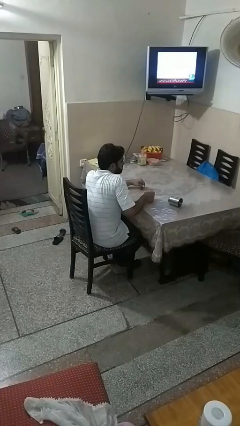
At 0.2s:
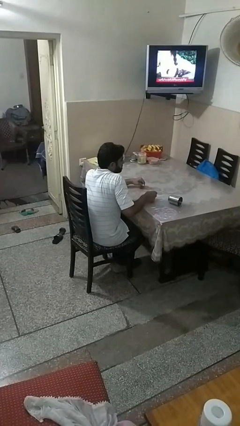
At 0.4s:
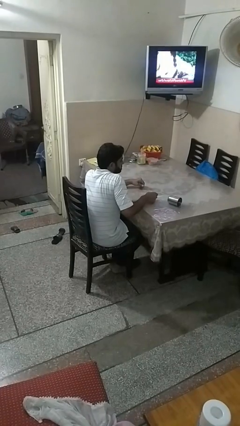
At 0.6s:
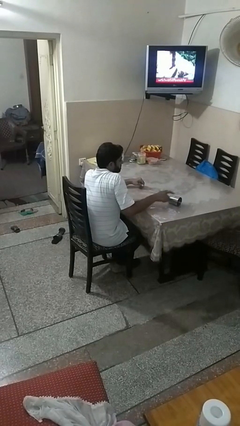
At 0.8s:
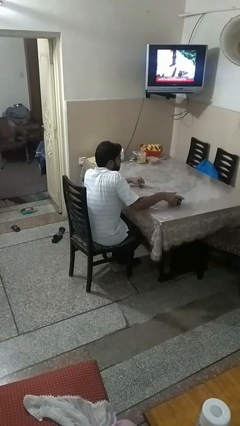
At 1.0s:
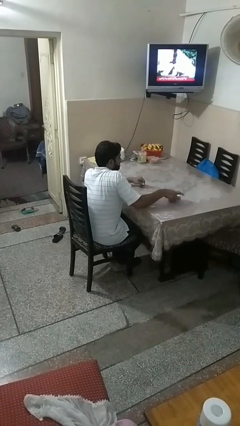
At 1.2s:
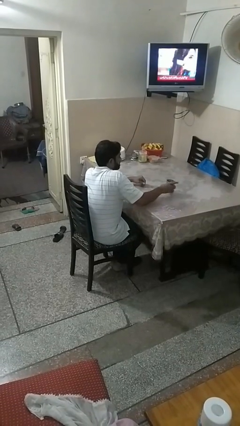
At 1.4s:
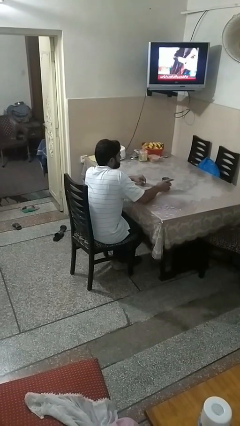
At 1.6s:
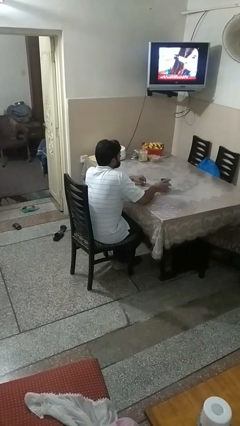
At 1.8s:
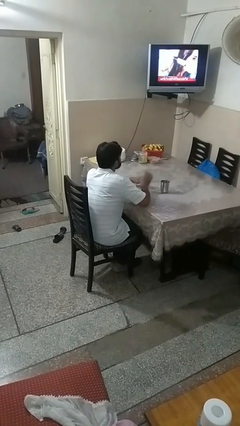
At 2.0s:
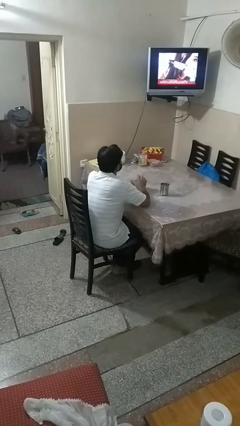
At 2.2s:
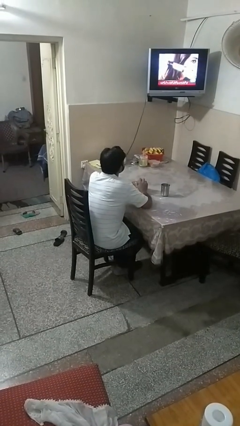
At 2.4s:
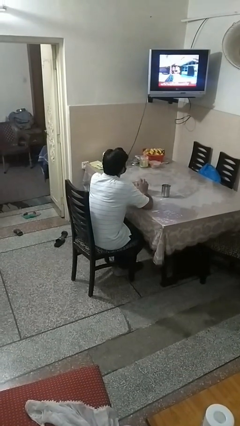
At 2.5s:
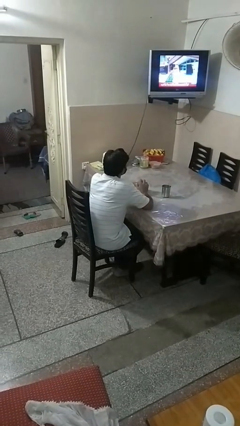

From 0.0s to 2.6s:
person sets upright glass

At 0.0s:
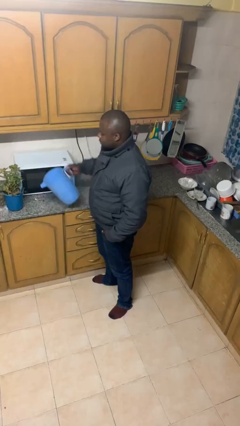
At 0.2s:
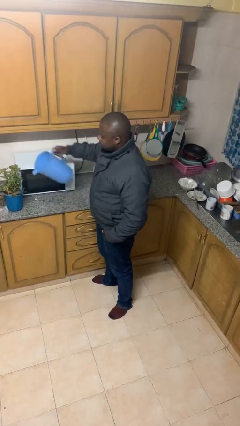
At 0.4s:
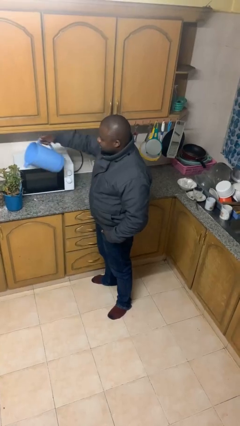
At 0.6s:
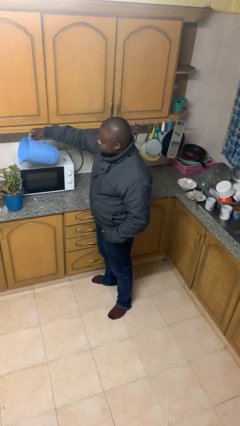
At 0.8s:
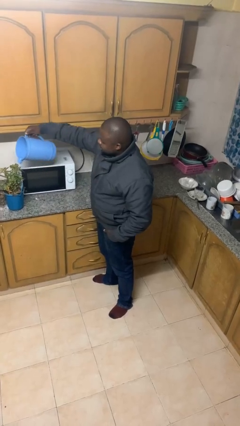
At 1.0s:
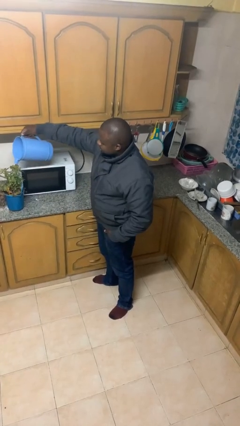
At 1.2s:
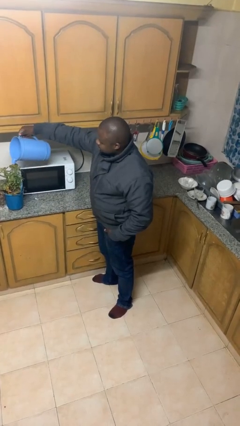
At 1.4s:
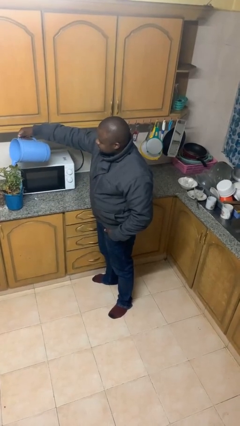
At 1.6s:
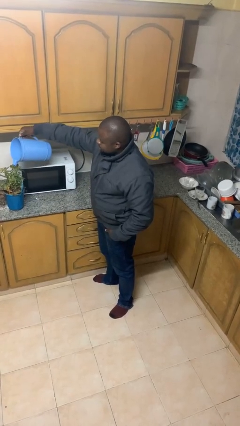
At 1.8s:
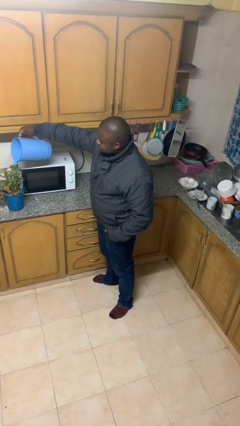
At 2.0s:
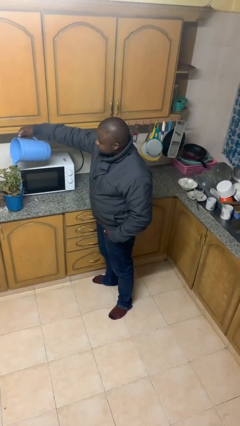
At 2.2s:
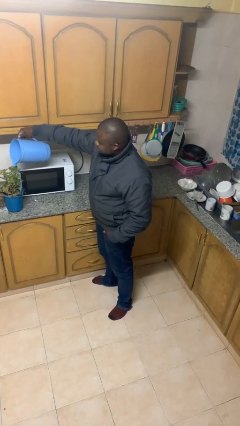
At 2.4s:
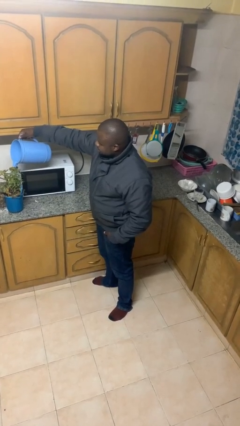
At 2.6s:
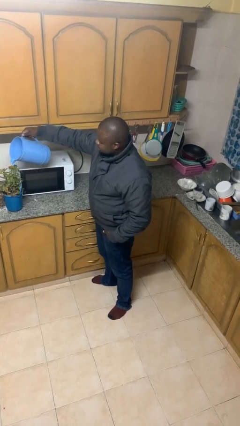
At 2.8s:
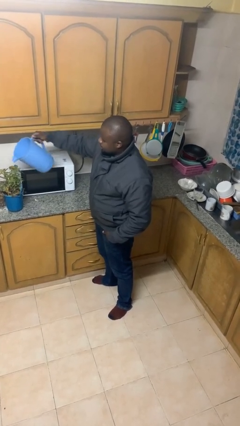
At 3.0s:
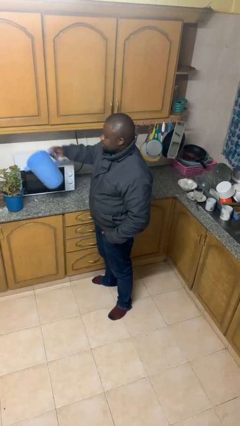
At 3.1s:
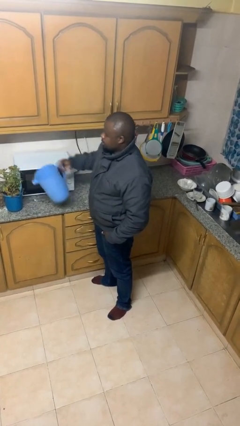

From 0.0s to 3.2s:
person waters houseplant

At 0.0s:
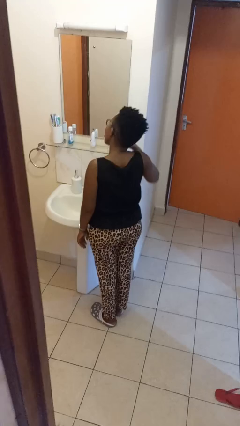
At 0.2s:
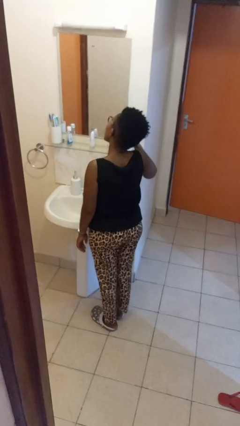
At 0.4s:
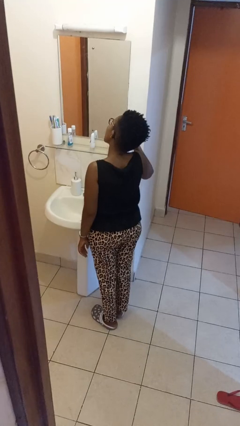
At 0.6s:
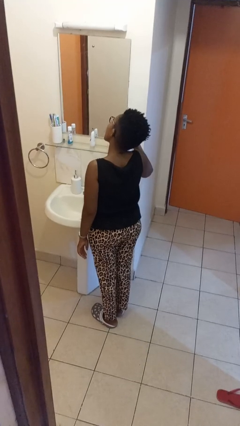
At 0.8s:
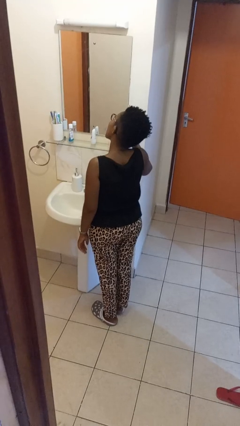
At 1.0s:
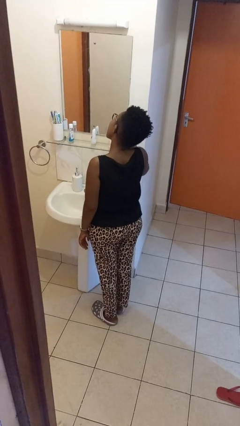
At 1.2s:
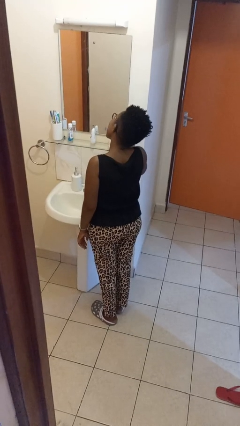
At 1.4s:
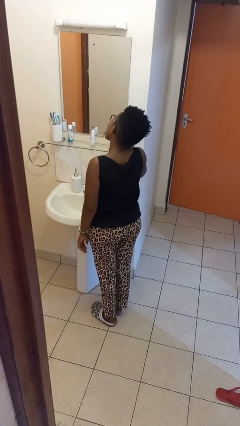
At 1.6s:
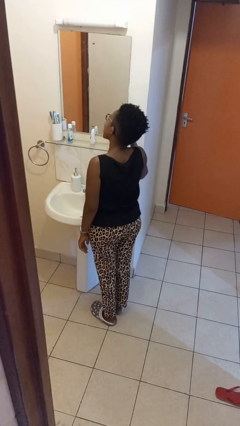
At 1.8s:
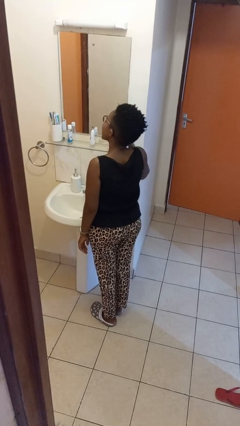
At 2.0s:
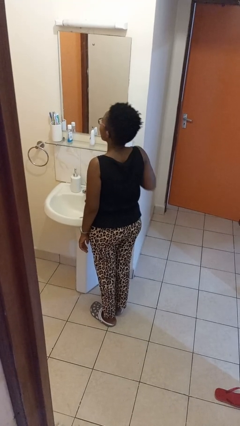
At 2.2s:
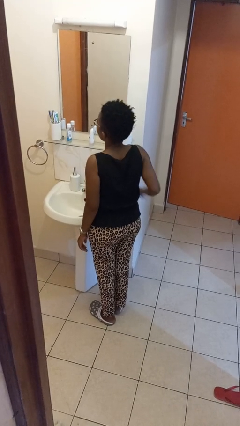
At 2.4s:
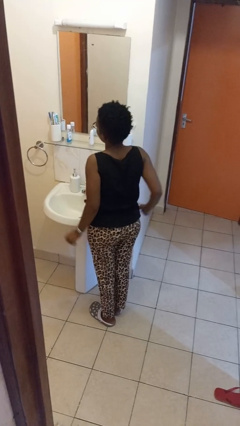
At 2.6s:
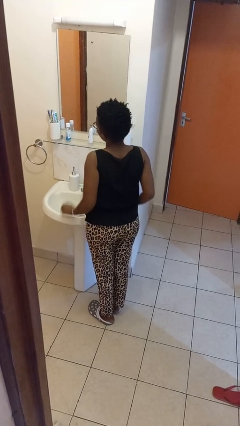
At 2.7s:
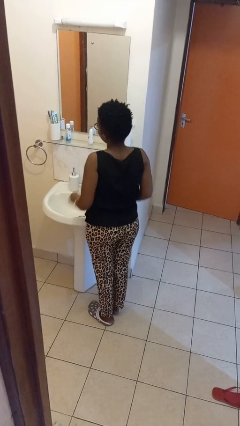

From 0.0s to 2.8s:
person brushes teeth

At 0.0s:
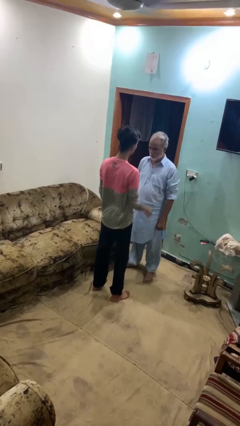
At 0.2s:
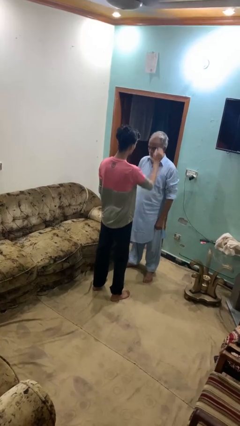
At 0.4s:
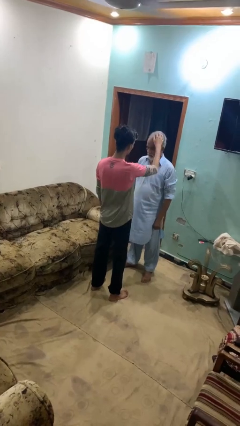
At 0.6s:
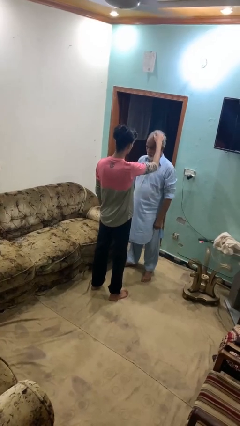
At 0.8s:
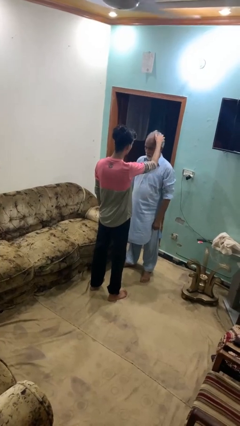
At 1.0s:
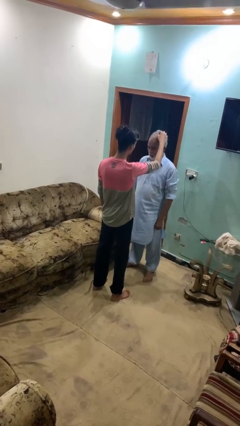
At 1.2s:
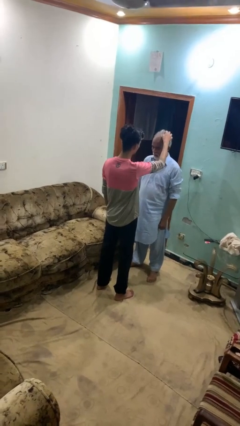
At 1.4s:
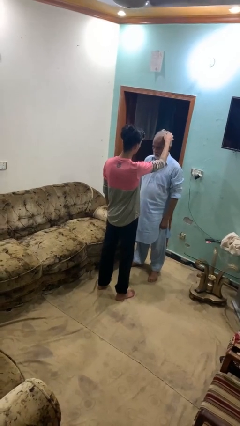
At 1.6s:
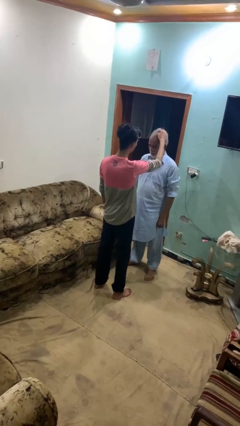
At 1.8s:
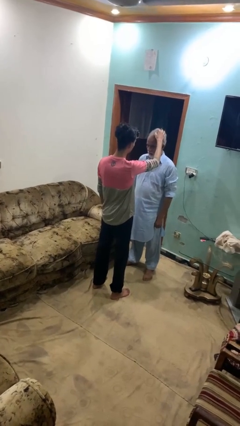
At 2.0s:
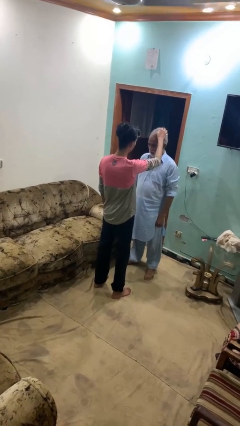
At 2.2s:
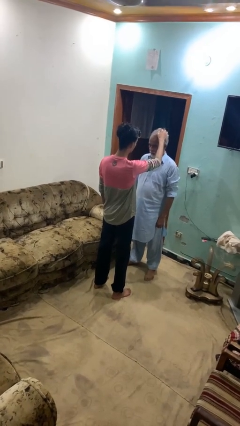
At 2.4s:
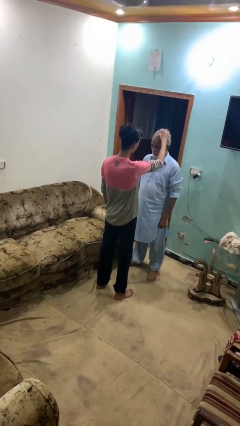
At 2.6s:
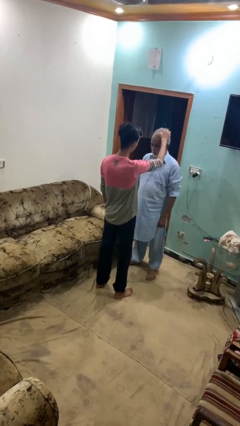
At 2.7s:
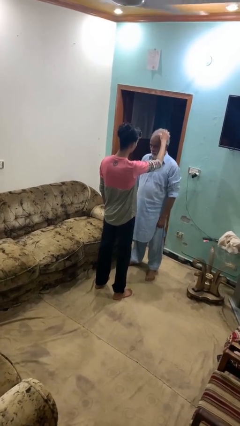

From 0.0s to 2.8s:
person grabs person by hair

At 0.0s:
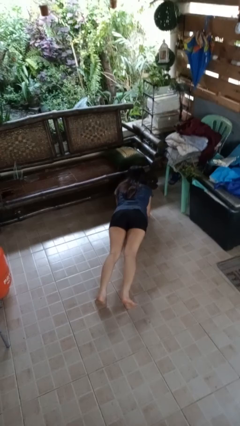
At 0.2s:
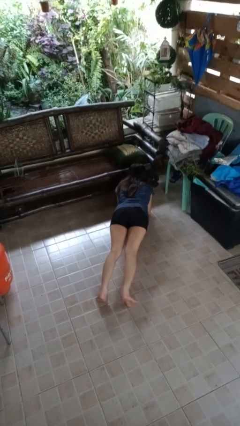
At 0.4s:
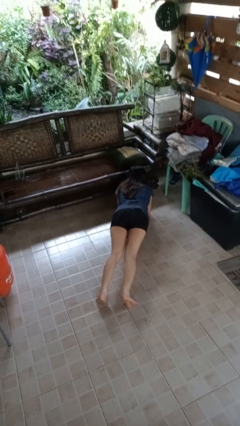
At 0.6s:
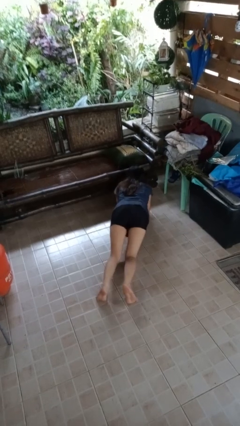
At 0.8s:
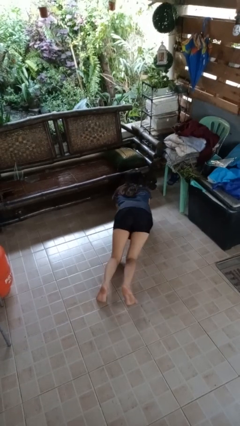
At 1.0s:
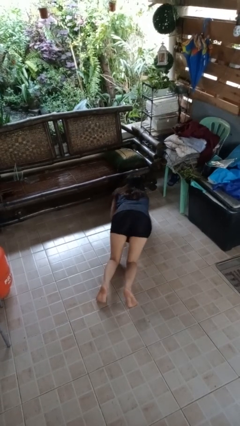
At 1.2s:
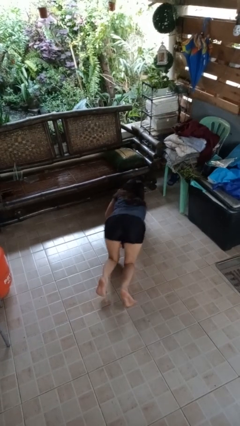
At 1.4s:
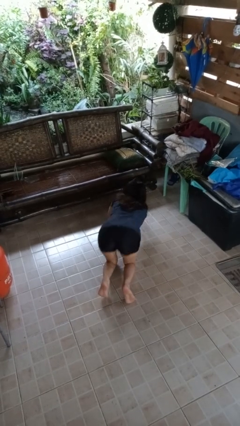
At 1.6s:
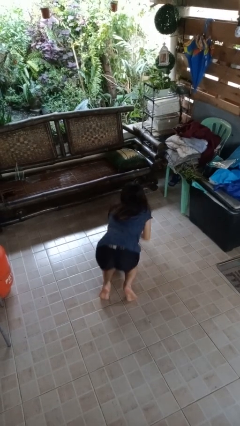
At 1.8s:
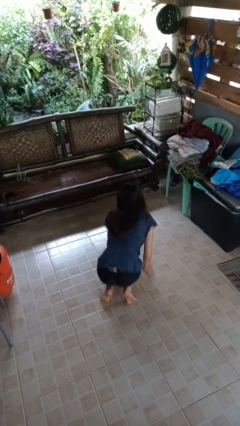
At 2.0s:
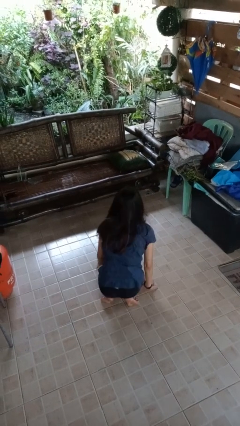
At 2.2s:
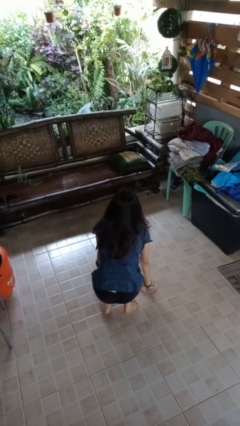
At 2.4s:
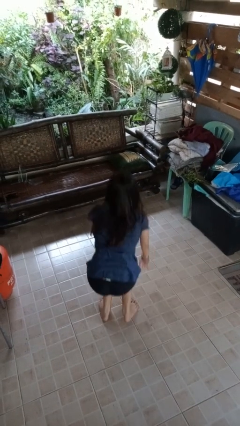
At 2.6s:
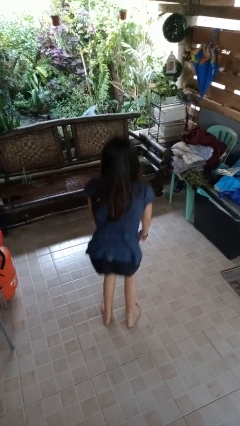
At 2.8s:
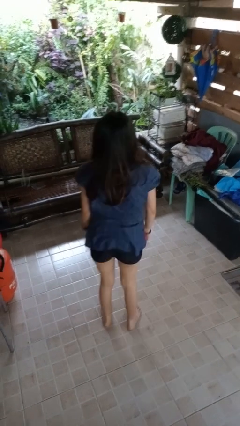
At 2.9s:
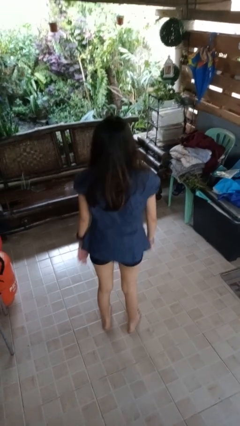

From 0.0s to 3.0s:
person stands up from floor

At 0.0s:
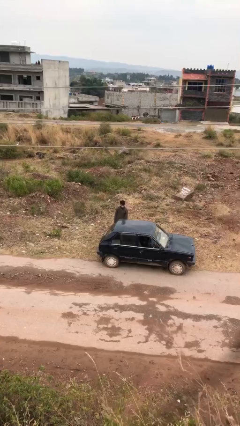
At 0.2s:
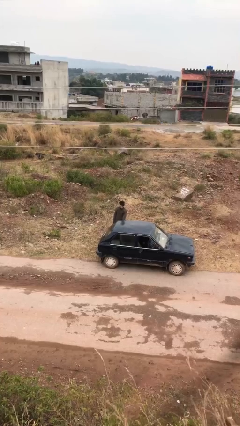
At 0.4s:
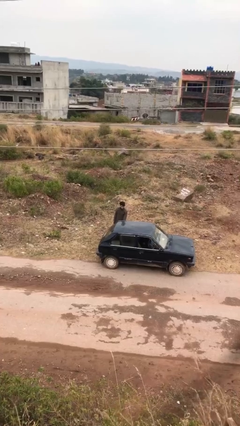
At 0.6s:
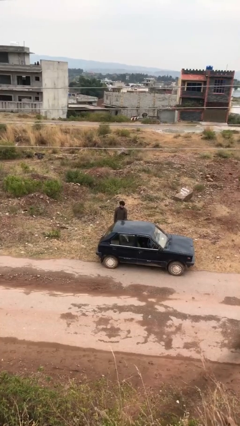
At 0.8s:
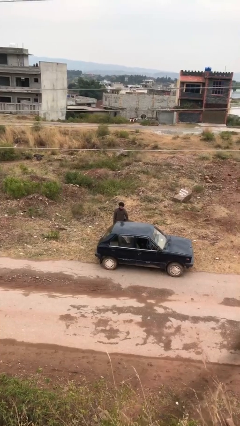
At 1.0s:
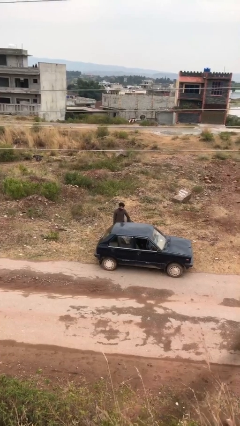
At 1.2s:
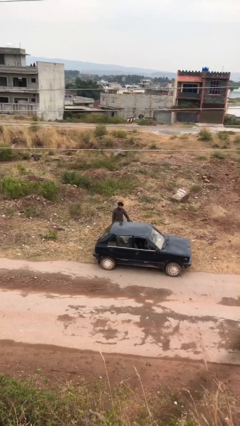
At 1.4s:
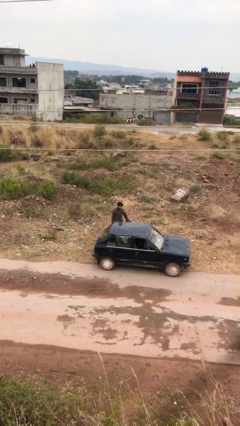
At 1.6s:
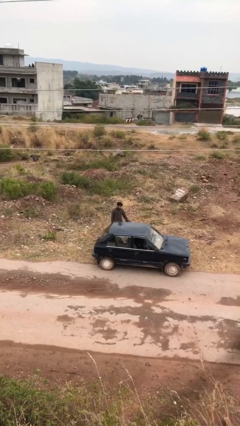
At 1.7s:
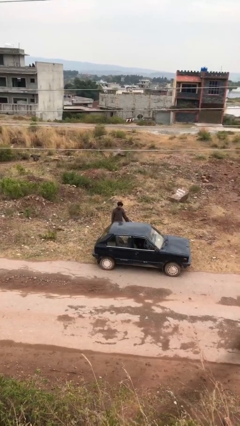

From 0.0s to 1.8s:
person opens car door

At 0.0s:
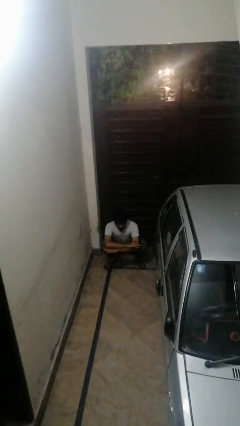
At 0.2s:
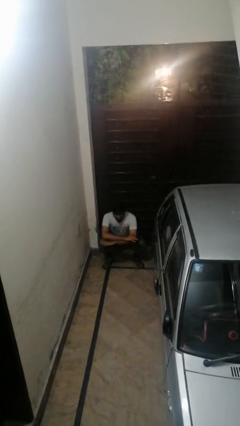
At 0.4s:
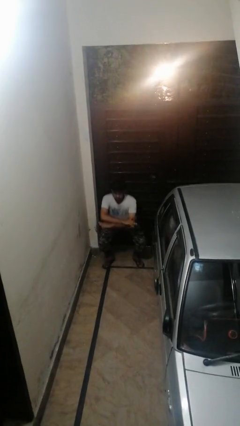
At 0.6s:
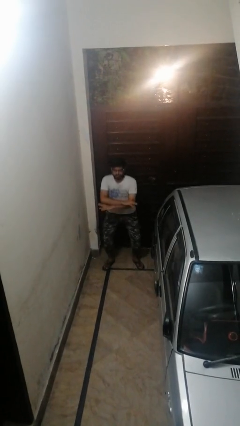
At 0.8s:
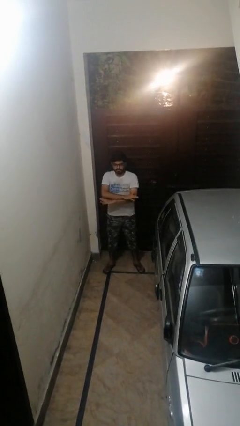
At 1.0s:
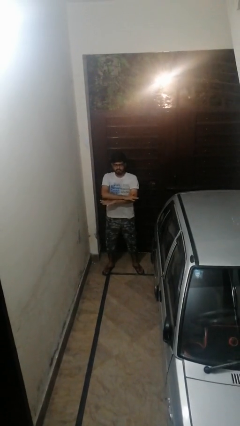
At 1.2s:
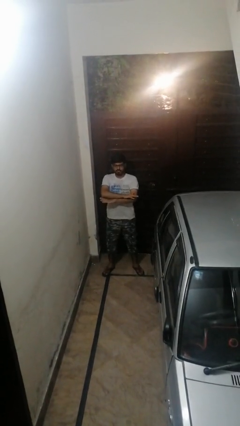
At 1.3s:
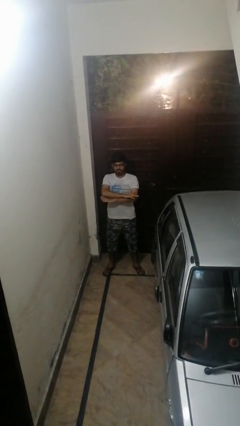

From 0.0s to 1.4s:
person stands up
